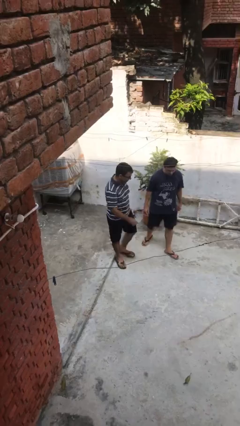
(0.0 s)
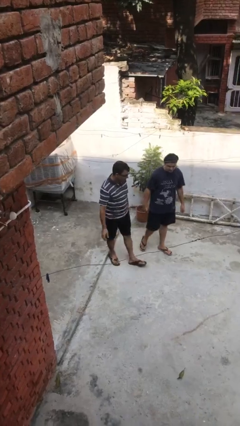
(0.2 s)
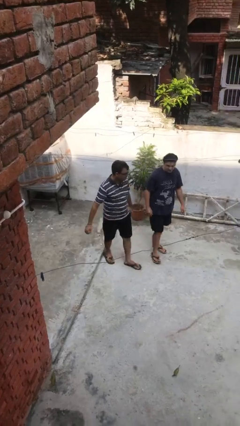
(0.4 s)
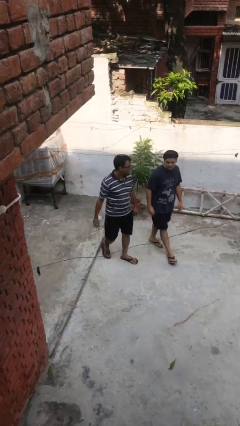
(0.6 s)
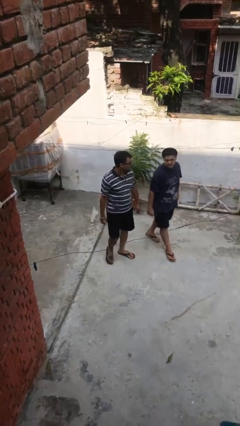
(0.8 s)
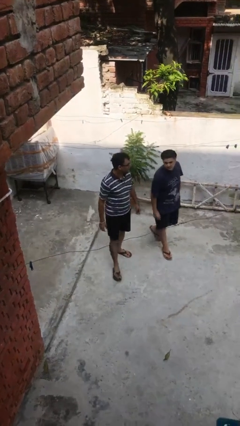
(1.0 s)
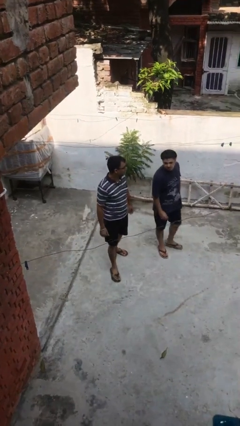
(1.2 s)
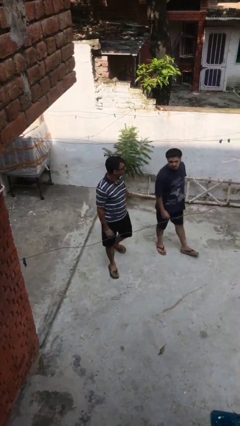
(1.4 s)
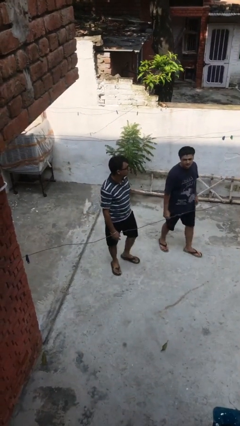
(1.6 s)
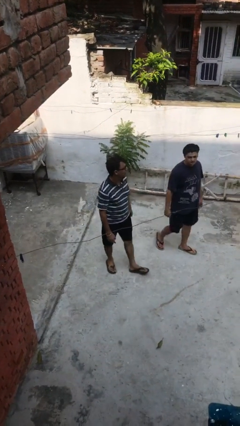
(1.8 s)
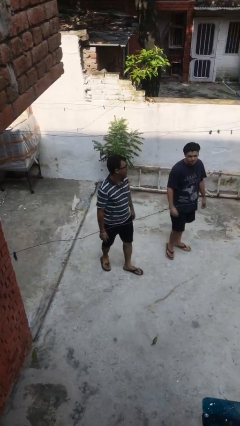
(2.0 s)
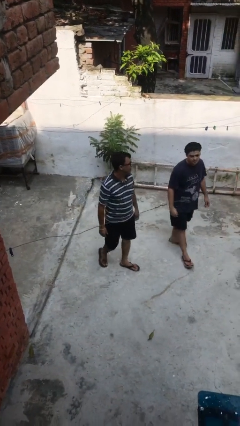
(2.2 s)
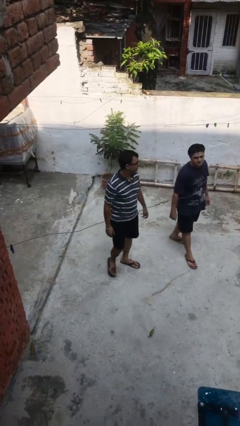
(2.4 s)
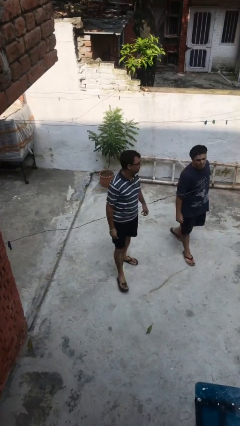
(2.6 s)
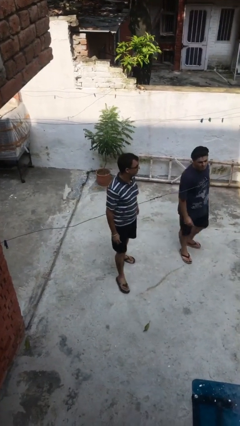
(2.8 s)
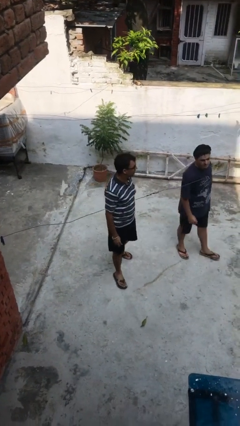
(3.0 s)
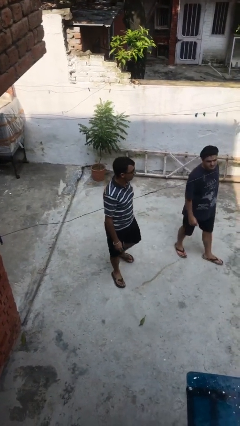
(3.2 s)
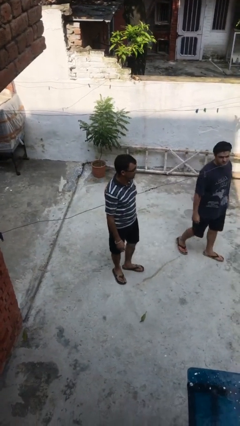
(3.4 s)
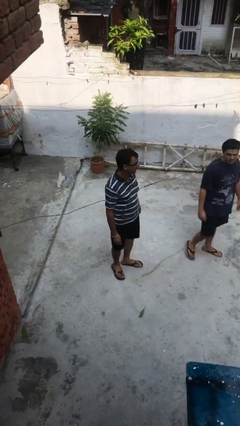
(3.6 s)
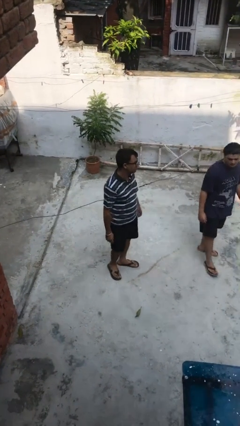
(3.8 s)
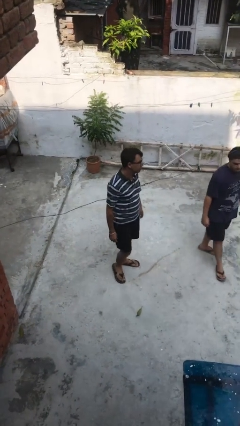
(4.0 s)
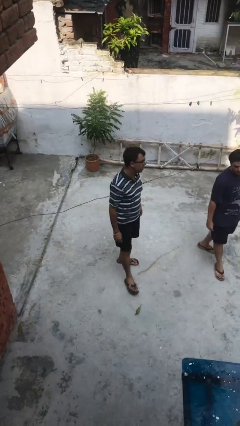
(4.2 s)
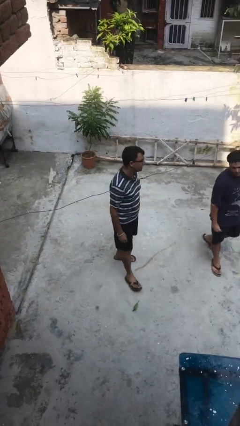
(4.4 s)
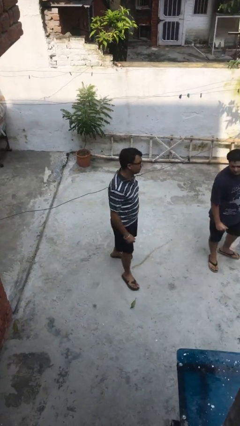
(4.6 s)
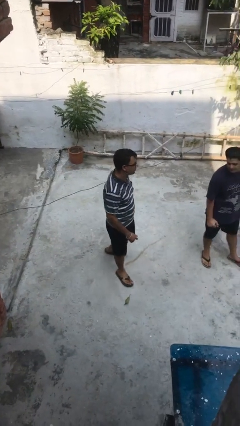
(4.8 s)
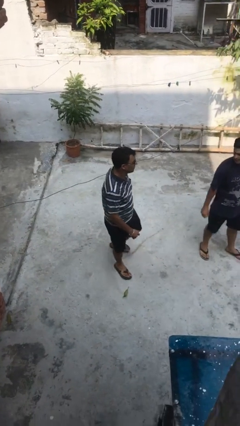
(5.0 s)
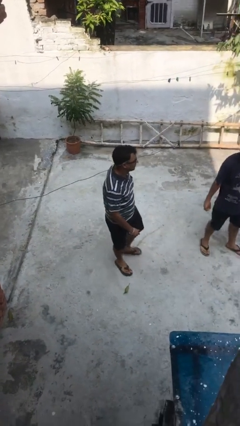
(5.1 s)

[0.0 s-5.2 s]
person talks to person

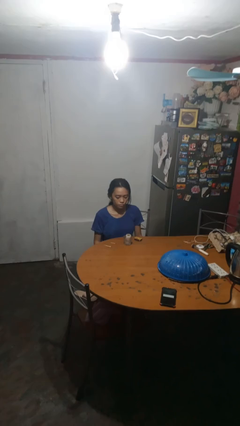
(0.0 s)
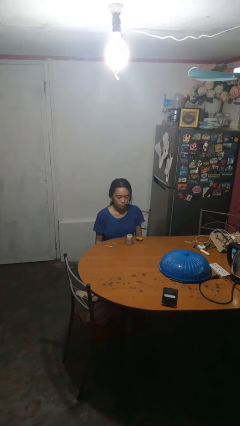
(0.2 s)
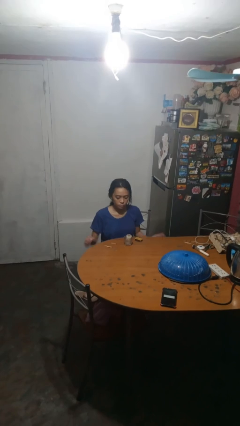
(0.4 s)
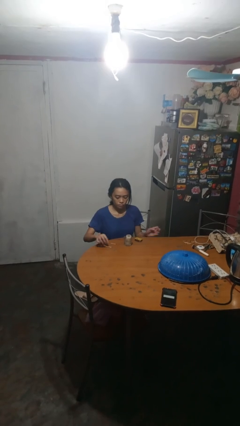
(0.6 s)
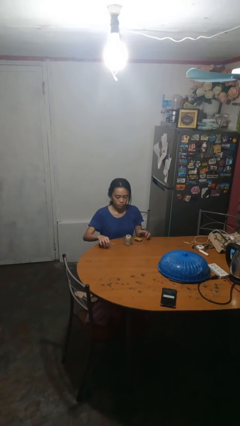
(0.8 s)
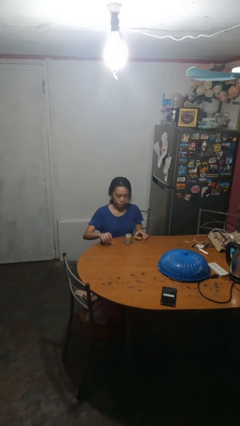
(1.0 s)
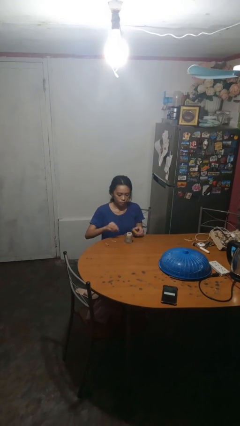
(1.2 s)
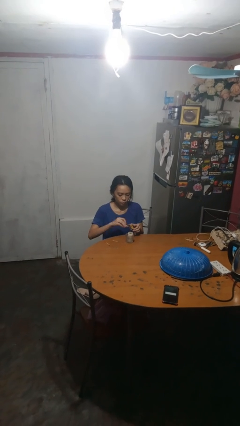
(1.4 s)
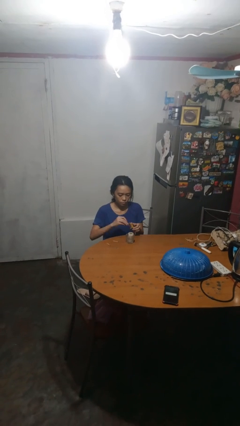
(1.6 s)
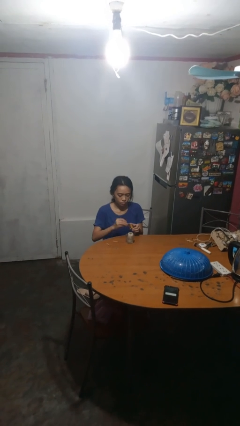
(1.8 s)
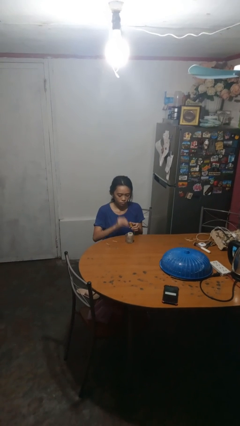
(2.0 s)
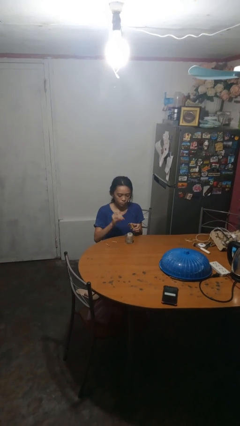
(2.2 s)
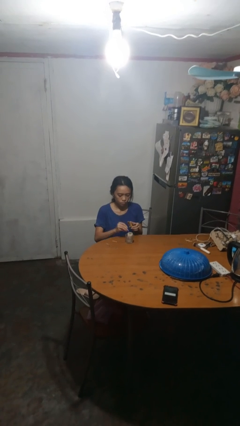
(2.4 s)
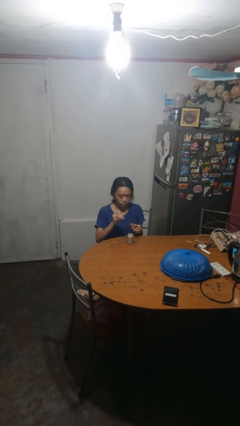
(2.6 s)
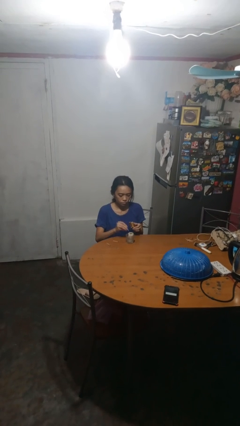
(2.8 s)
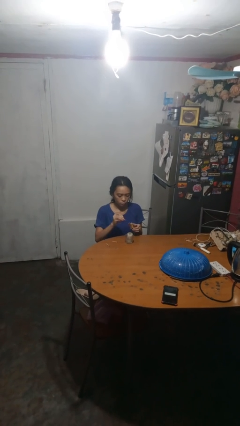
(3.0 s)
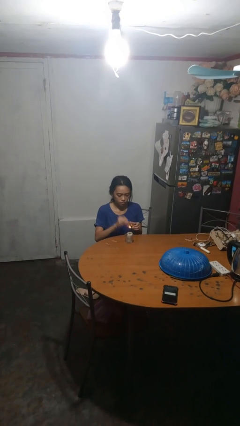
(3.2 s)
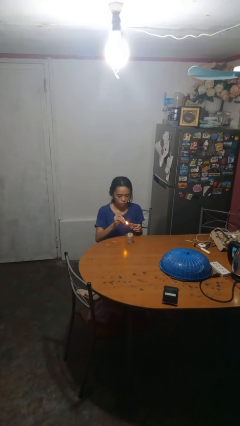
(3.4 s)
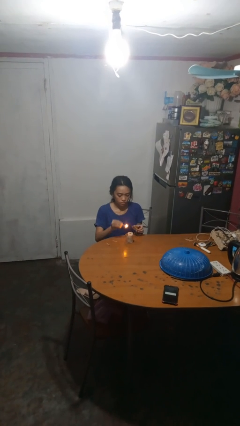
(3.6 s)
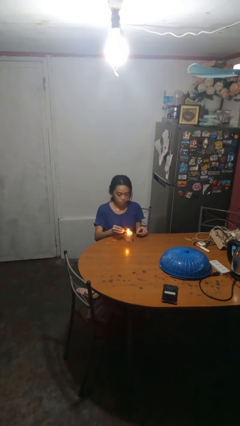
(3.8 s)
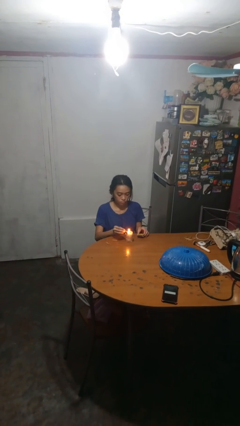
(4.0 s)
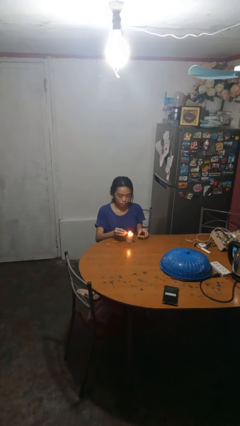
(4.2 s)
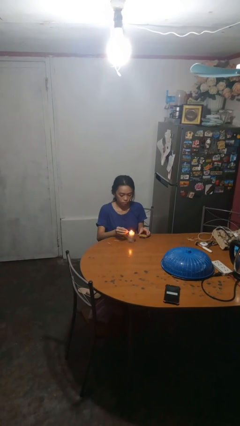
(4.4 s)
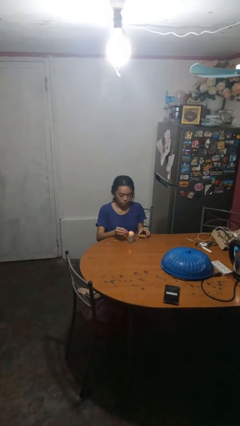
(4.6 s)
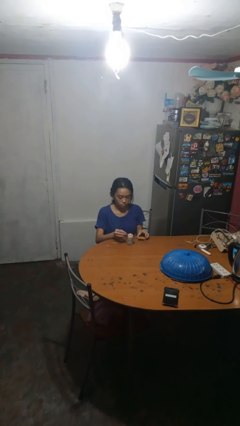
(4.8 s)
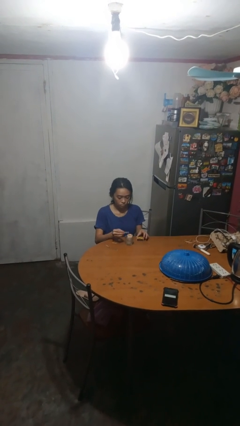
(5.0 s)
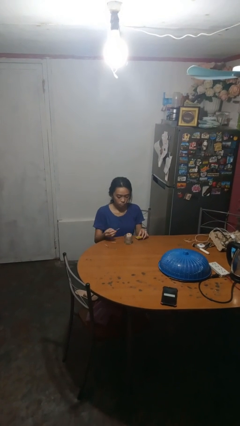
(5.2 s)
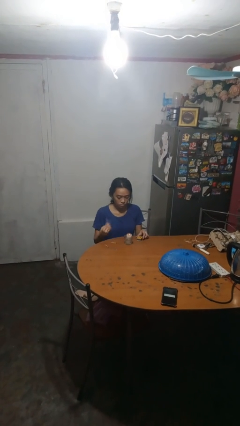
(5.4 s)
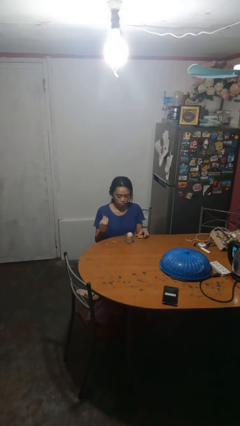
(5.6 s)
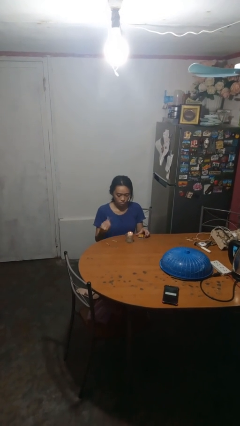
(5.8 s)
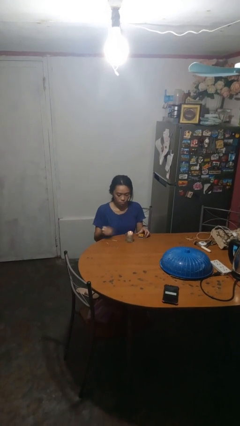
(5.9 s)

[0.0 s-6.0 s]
person lights candle

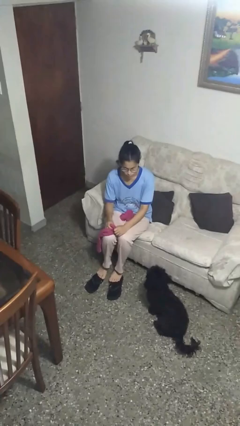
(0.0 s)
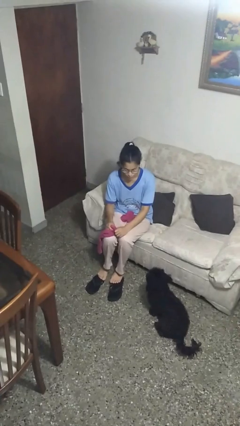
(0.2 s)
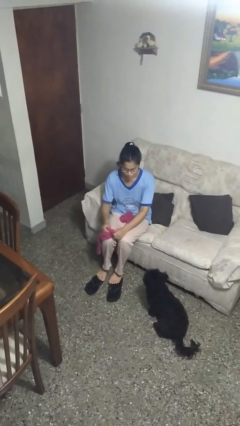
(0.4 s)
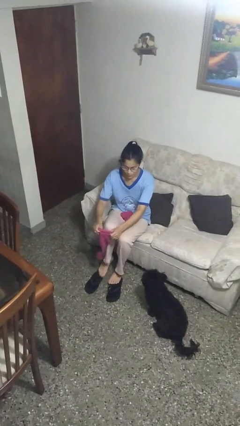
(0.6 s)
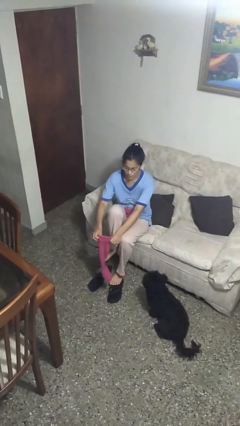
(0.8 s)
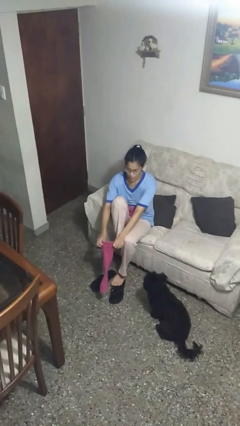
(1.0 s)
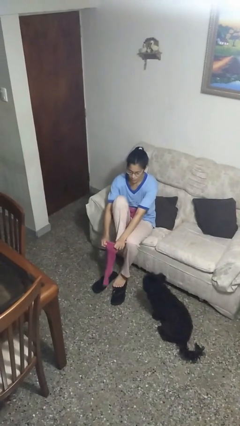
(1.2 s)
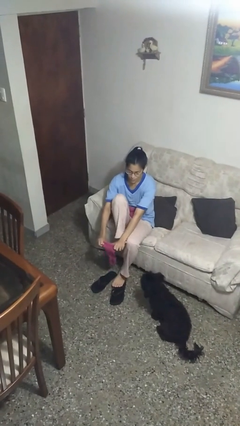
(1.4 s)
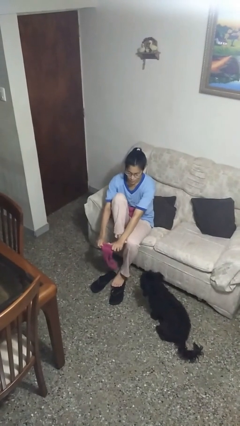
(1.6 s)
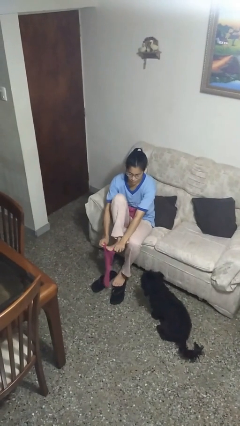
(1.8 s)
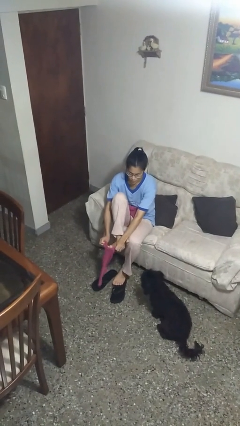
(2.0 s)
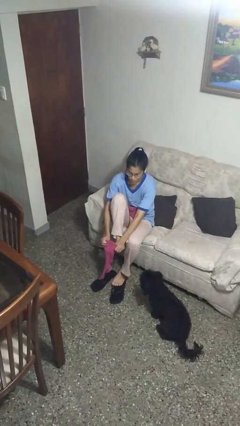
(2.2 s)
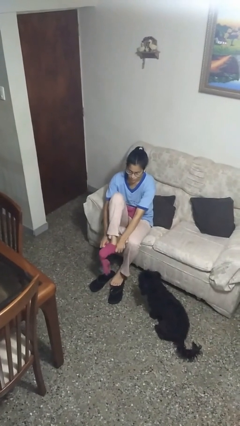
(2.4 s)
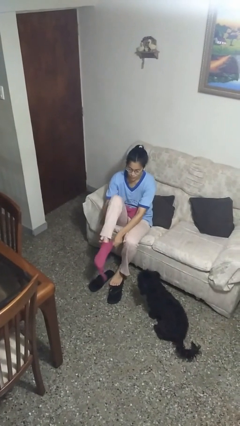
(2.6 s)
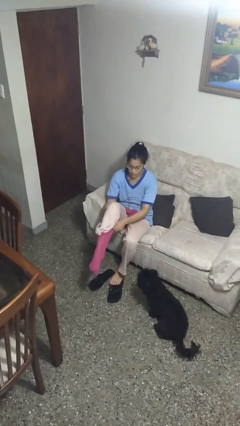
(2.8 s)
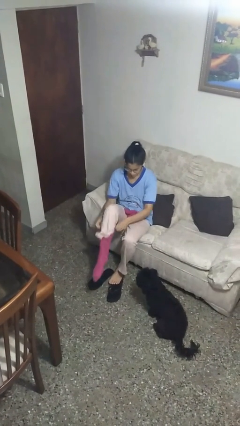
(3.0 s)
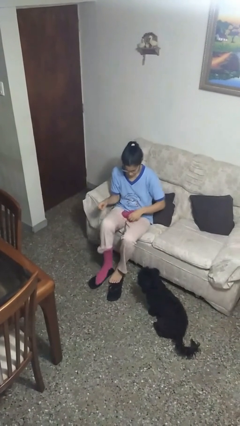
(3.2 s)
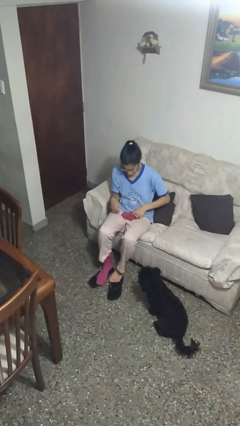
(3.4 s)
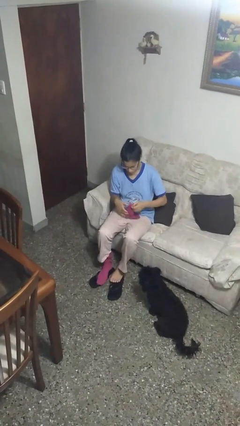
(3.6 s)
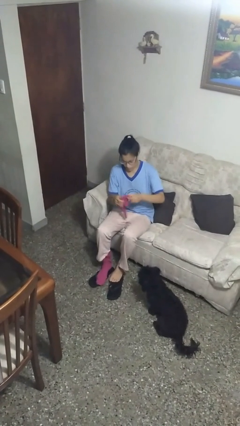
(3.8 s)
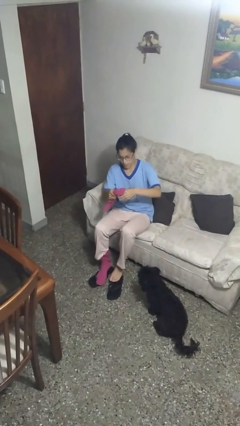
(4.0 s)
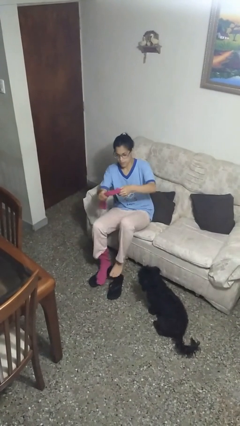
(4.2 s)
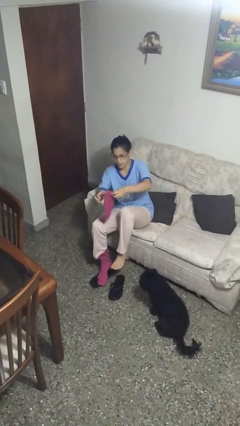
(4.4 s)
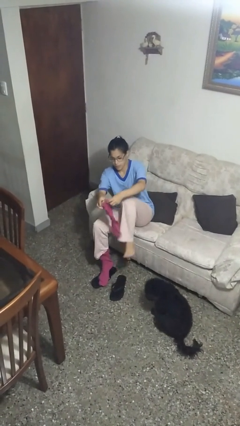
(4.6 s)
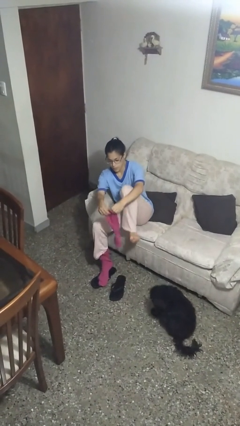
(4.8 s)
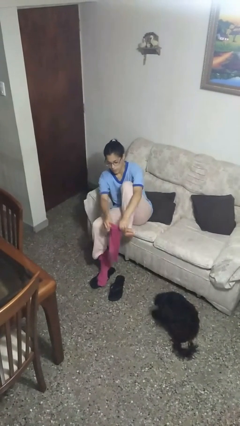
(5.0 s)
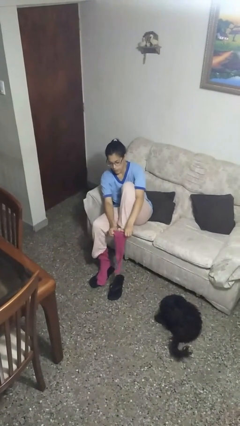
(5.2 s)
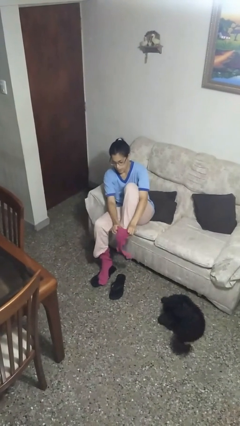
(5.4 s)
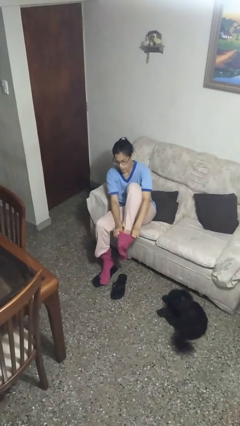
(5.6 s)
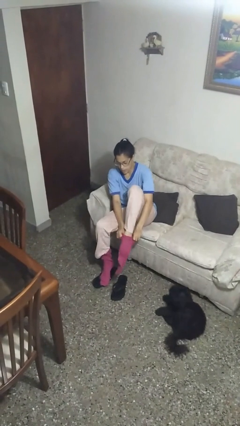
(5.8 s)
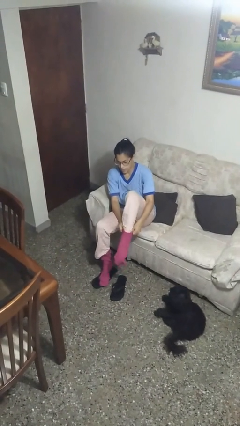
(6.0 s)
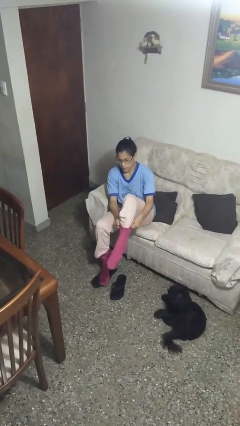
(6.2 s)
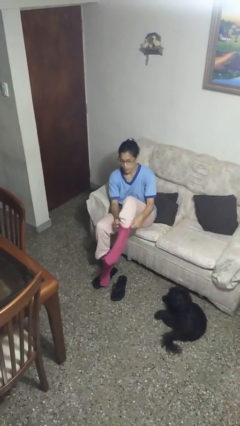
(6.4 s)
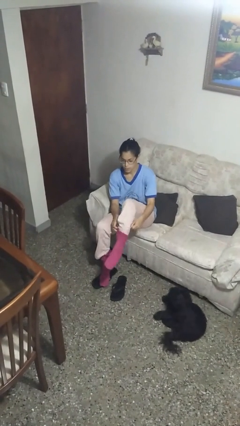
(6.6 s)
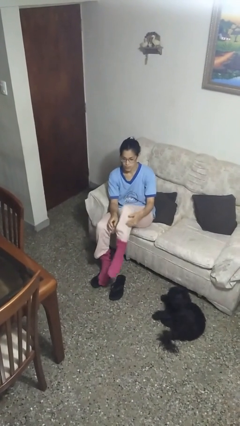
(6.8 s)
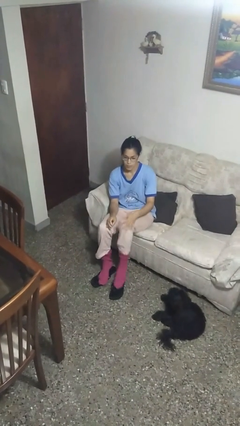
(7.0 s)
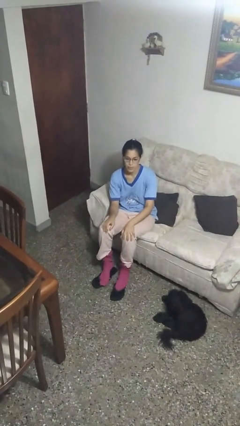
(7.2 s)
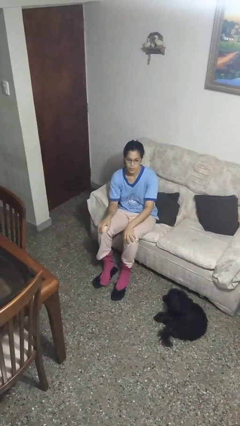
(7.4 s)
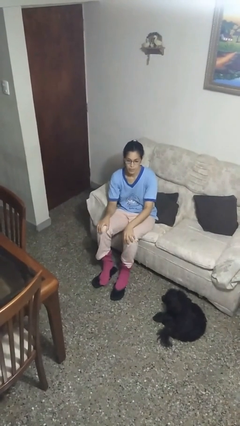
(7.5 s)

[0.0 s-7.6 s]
person puts on socks
